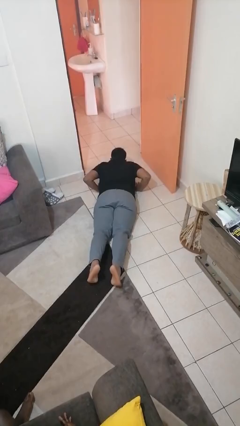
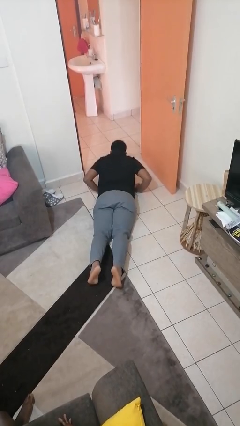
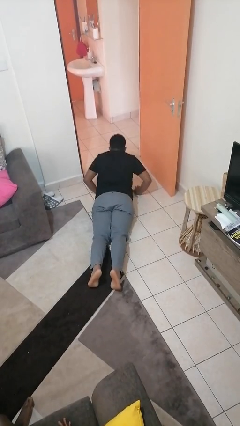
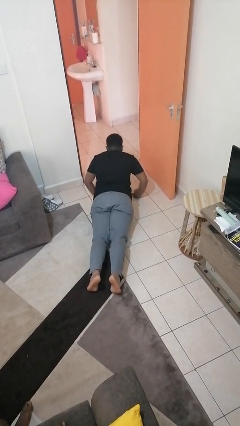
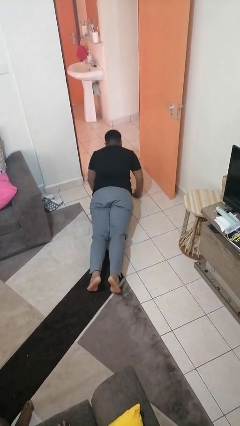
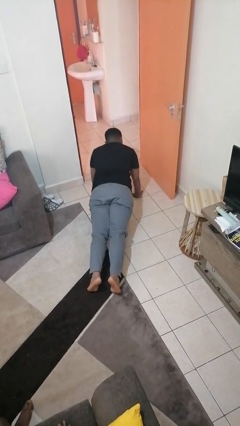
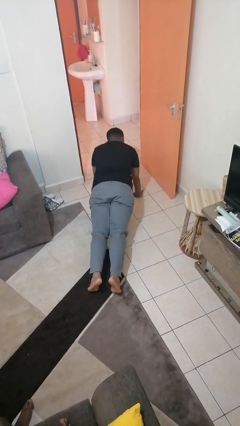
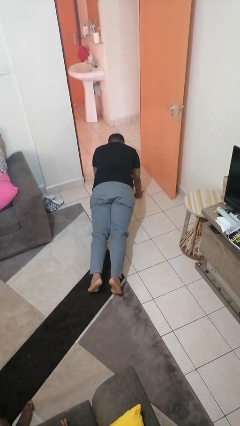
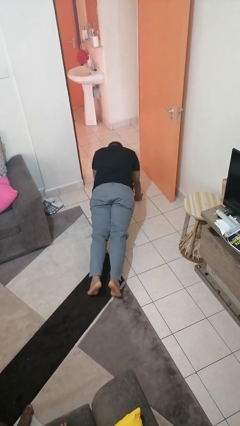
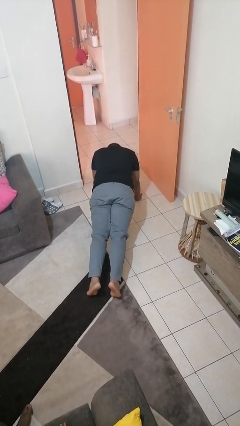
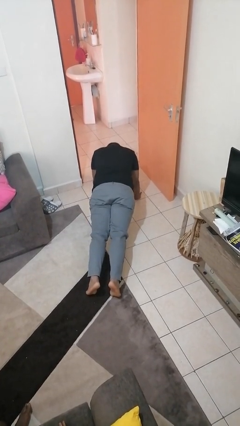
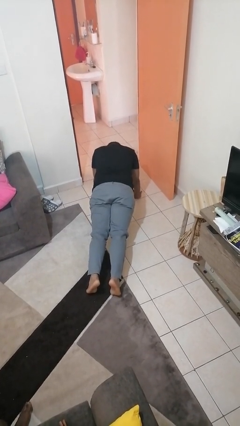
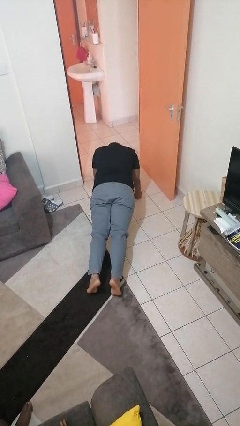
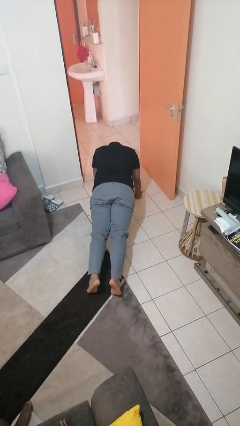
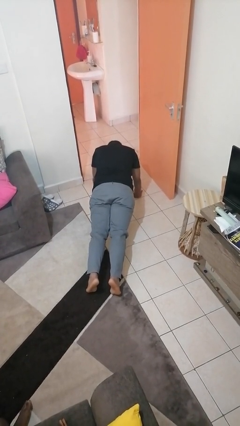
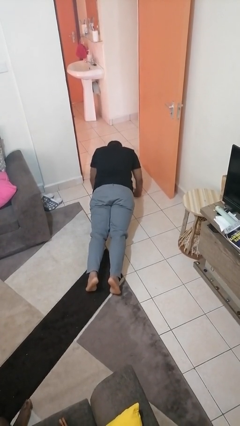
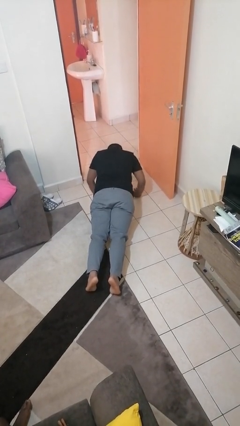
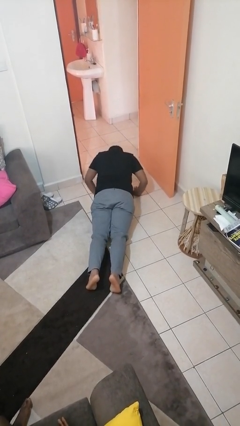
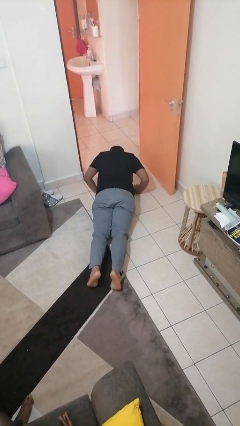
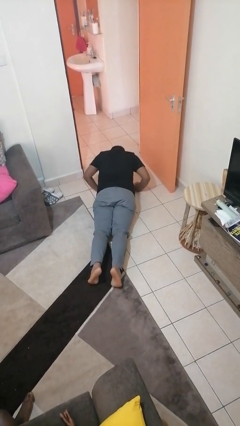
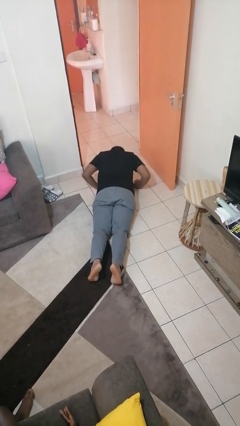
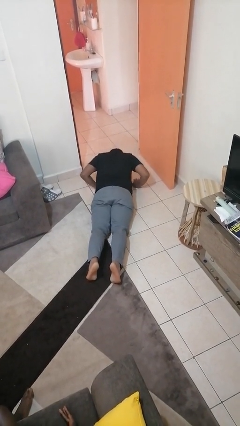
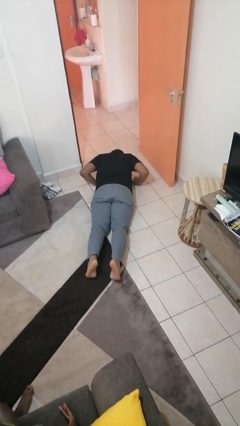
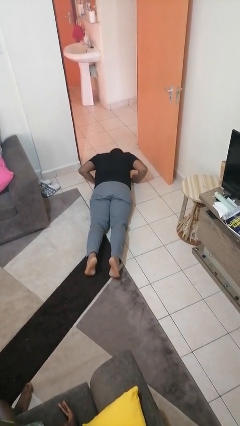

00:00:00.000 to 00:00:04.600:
person exercises with pushup

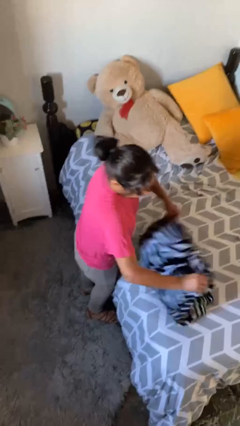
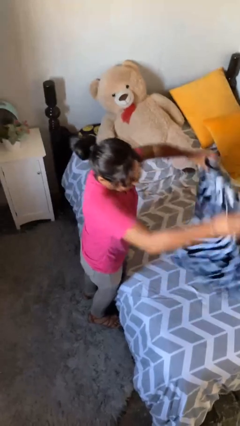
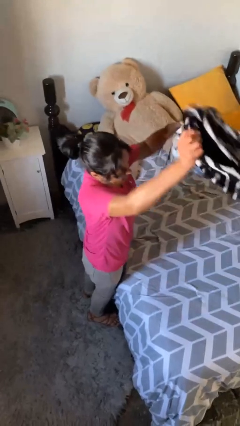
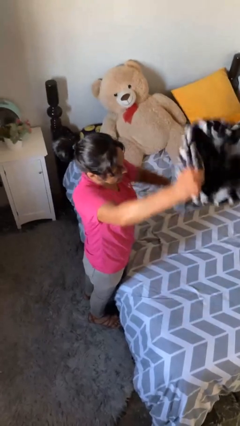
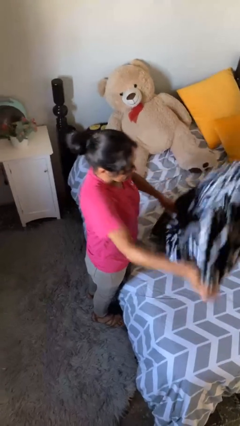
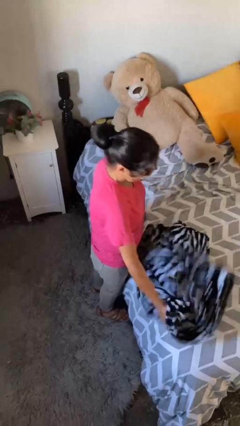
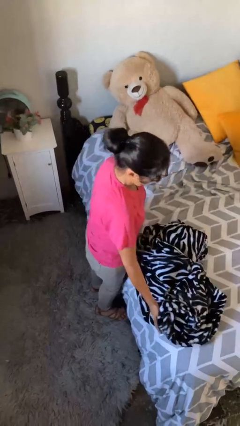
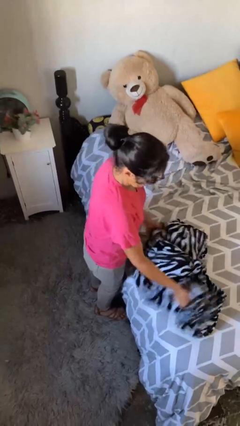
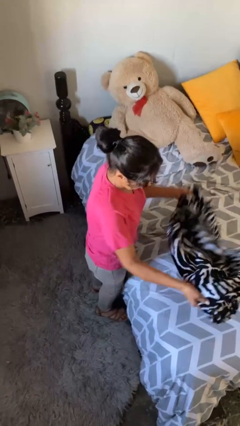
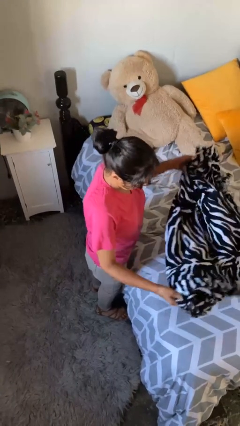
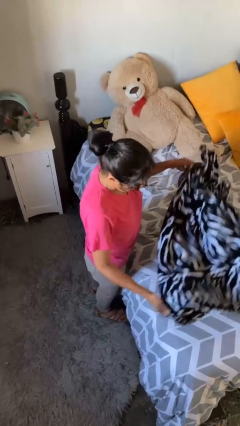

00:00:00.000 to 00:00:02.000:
person unfolds blanket

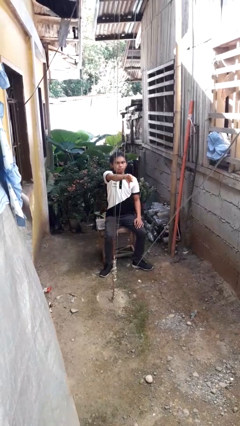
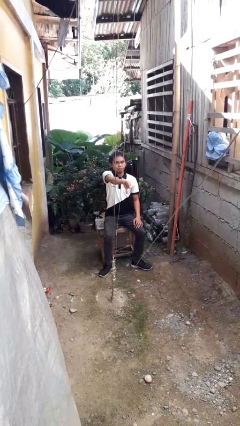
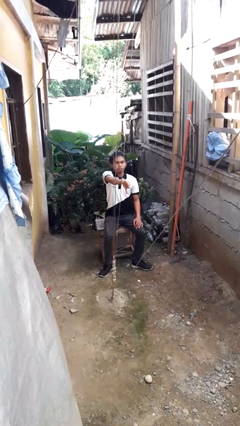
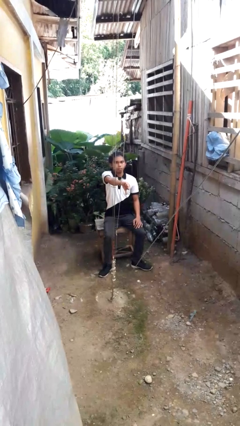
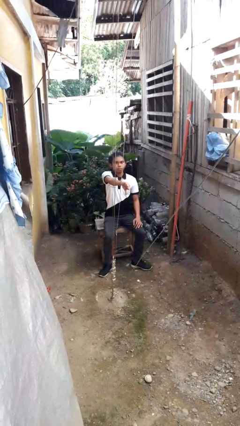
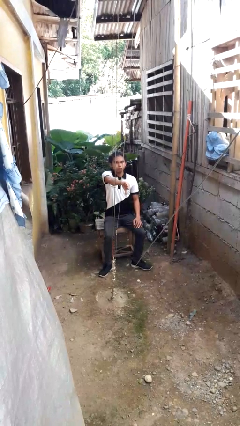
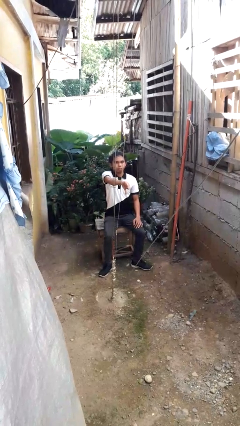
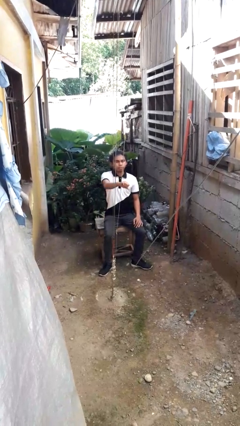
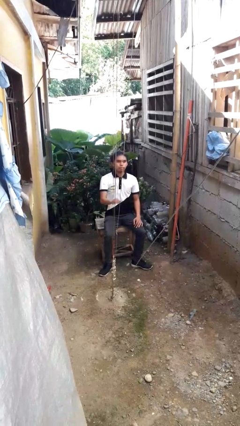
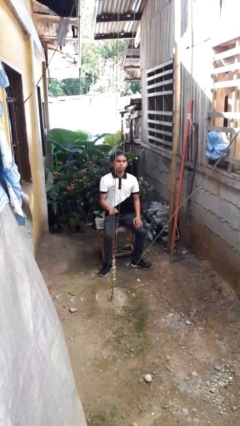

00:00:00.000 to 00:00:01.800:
person gestures thumbs down

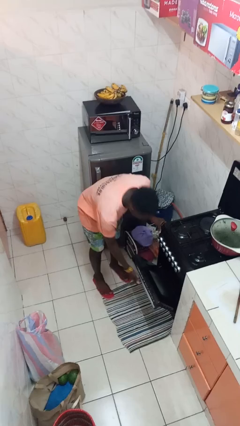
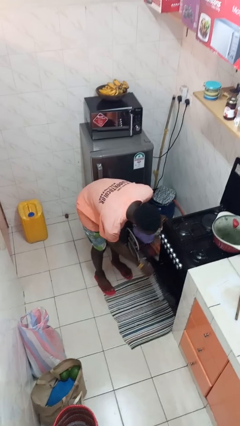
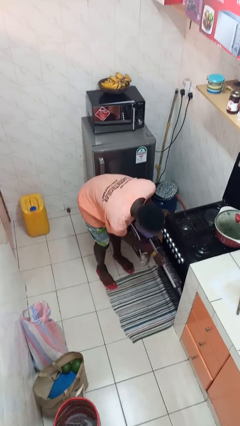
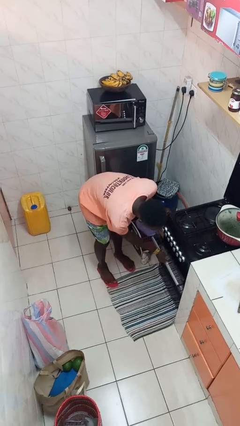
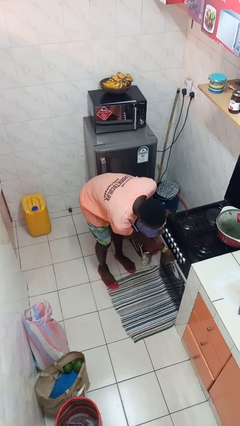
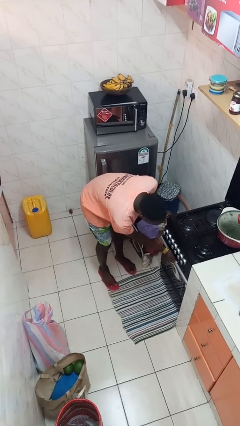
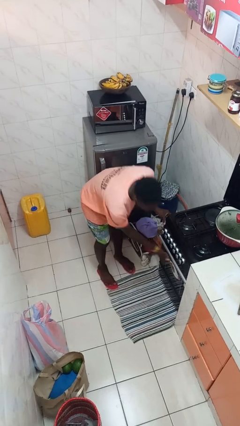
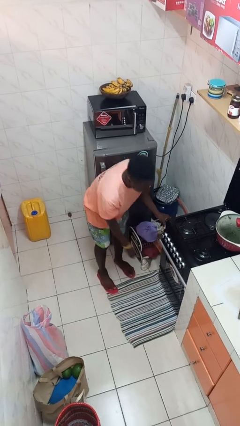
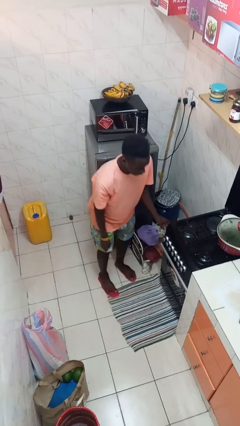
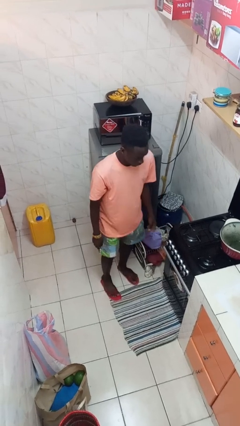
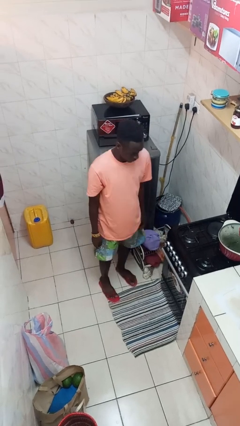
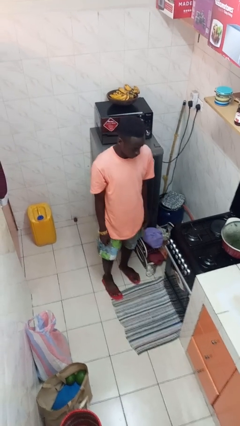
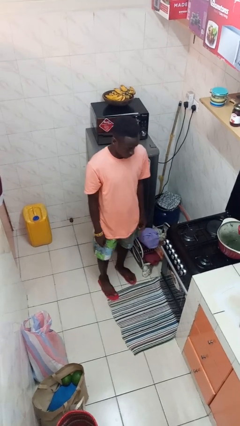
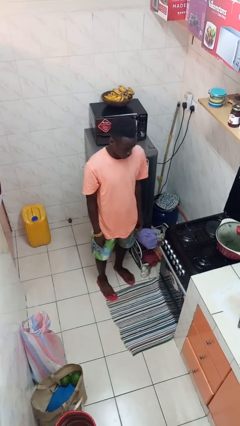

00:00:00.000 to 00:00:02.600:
person closes oven door

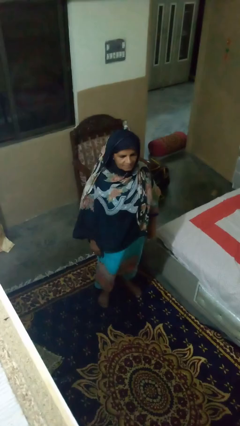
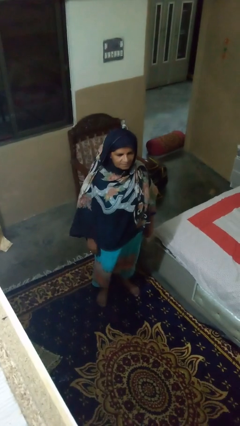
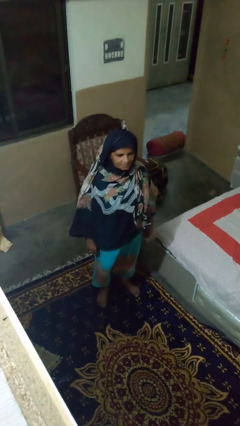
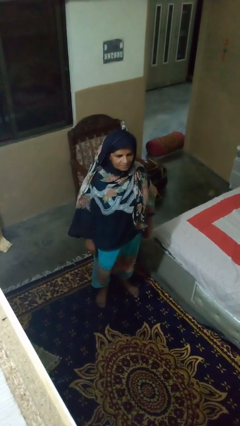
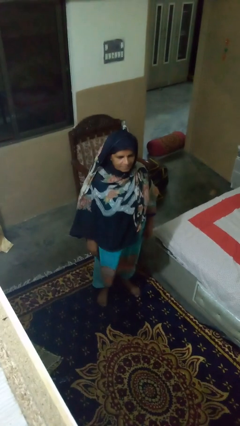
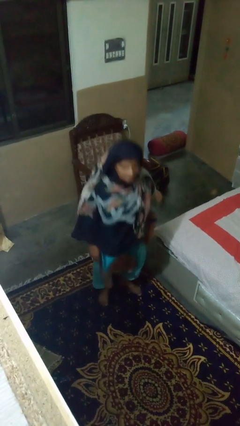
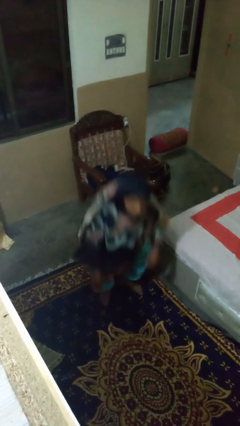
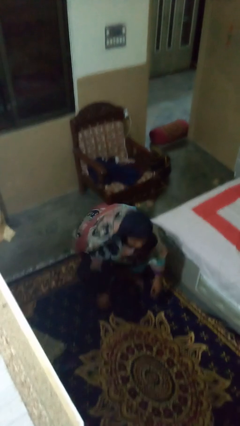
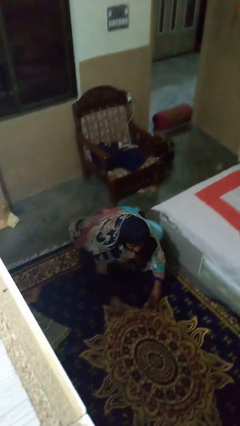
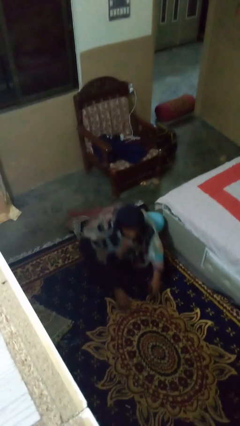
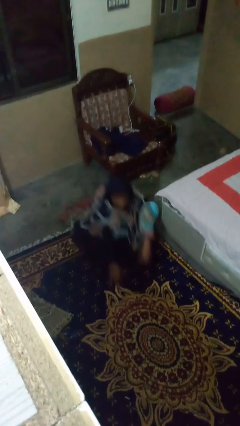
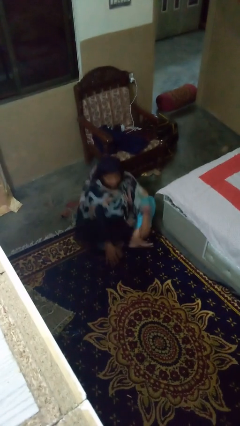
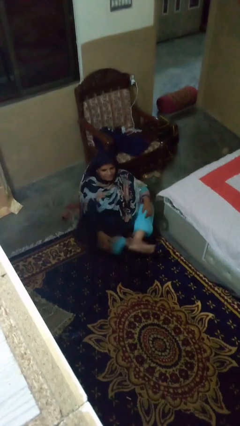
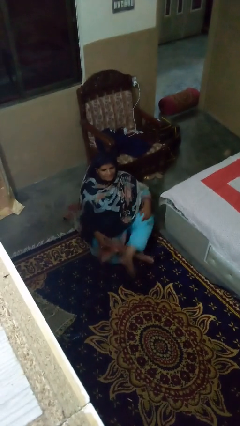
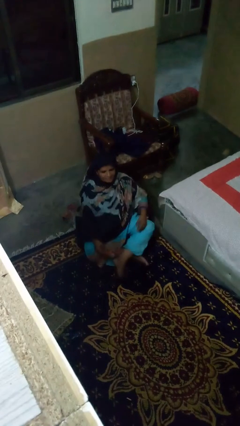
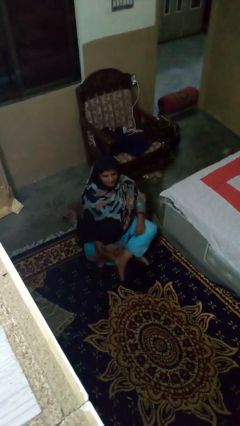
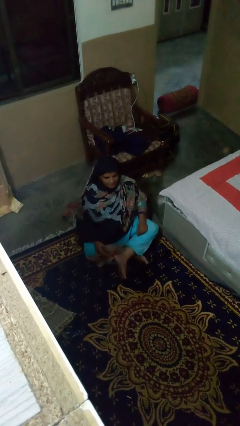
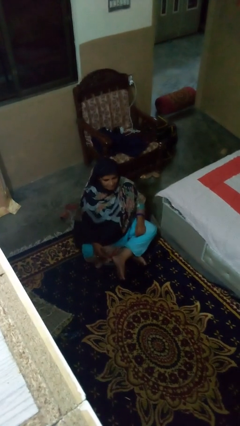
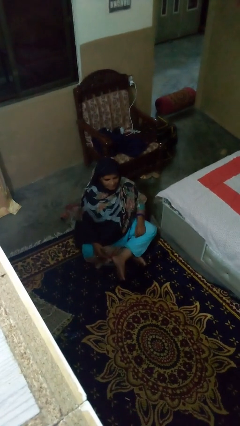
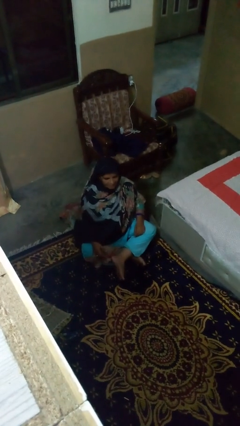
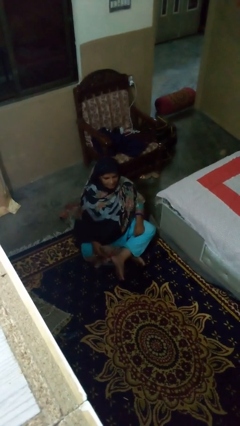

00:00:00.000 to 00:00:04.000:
person sits crisscross

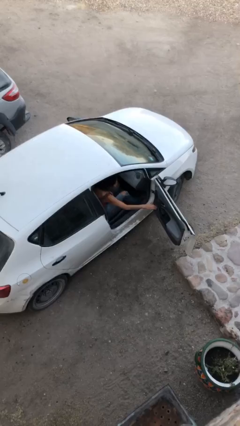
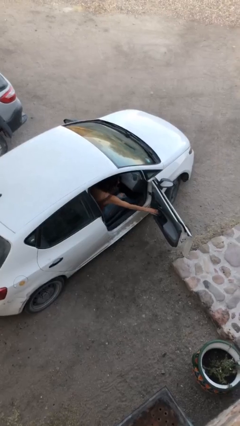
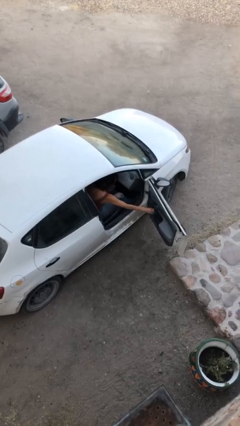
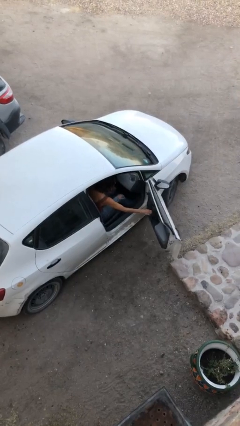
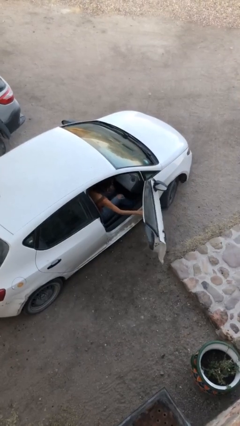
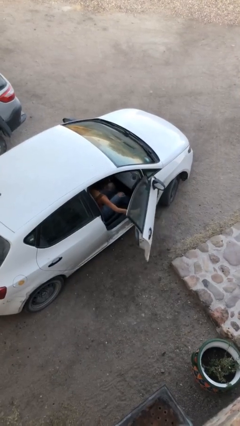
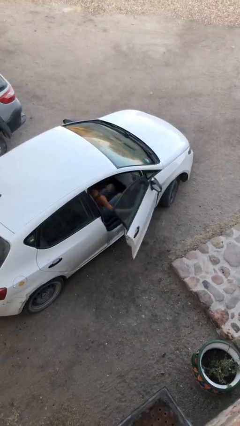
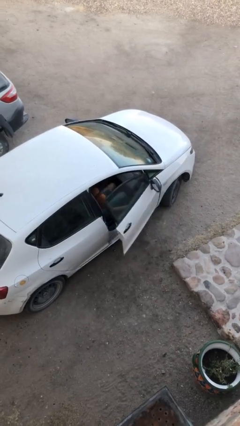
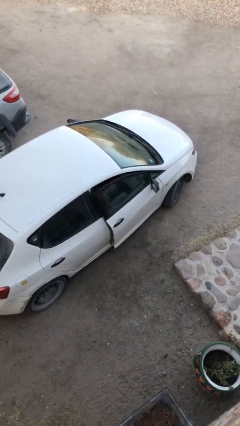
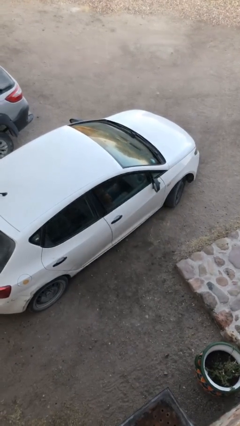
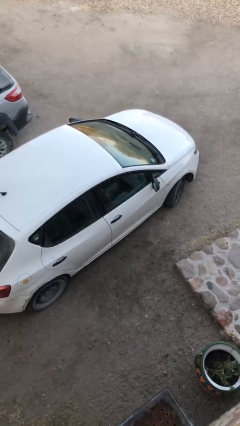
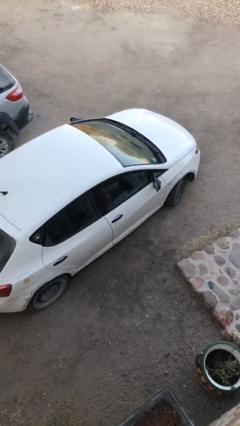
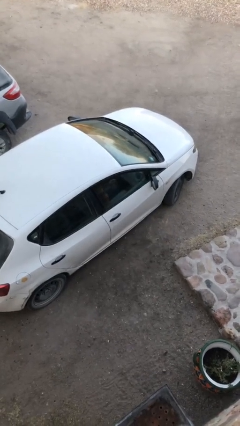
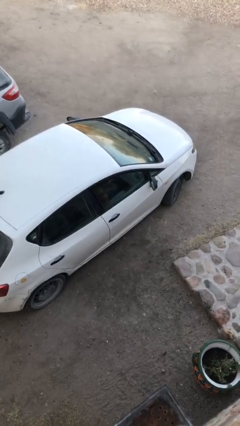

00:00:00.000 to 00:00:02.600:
person closes car door

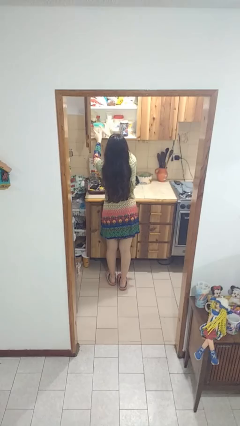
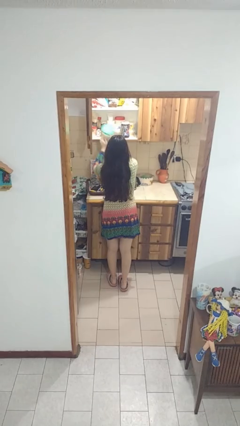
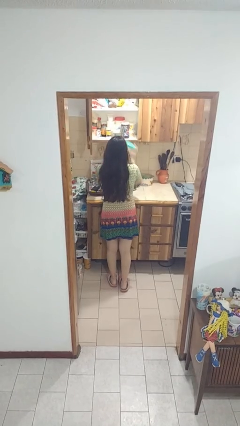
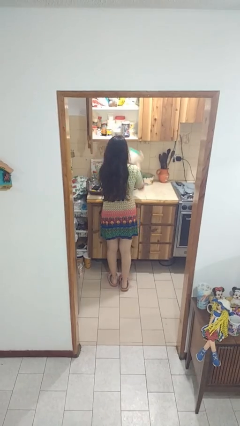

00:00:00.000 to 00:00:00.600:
person takes object from cabinet
